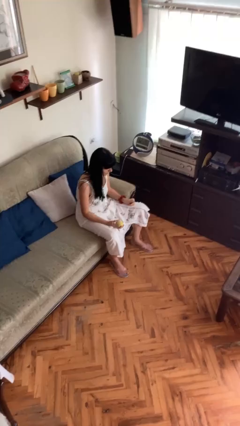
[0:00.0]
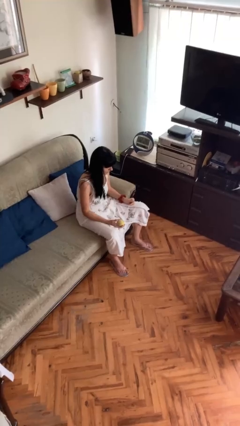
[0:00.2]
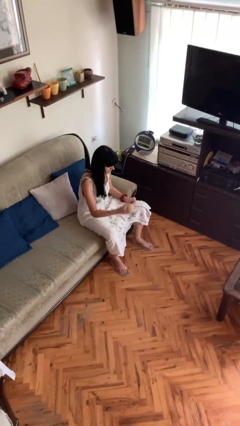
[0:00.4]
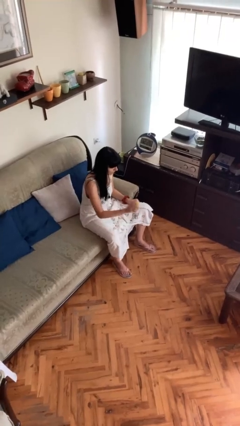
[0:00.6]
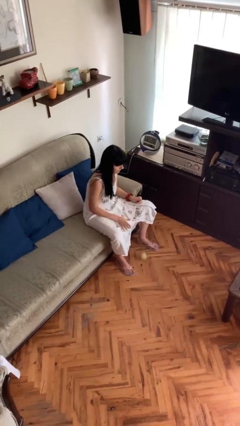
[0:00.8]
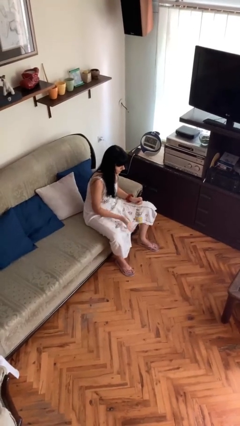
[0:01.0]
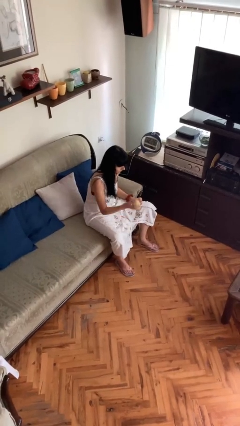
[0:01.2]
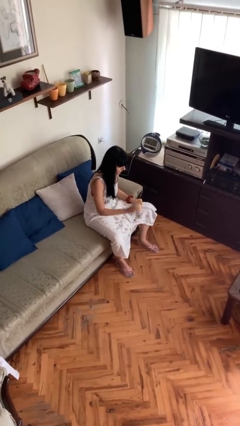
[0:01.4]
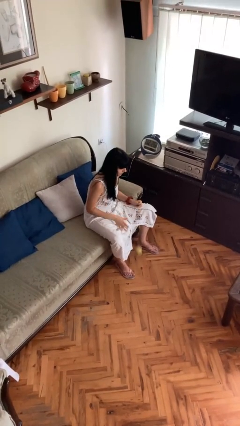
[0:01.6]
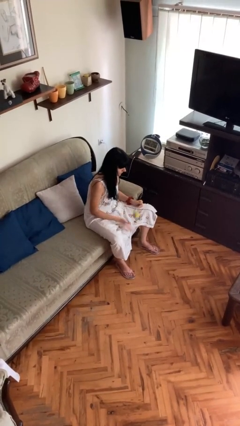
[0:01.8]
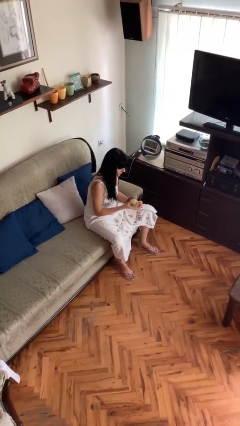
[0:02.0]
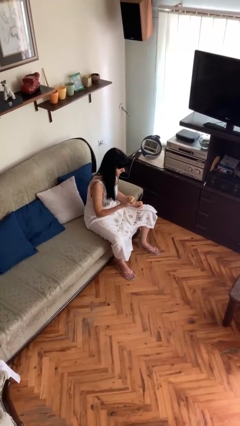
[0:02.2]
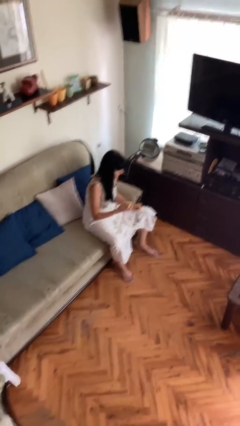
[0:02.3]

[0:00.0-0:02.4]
person bounces ball on floor

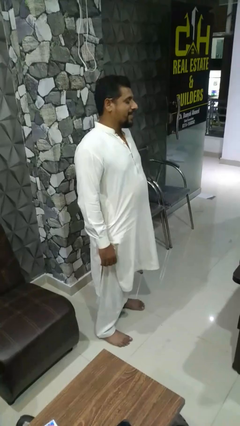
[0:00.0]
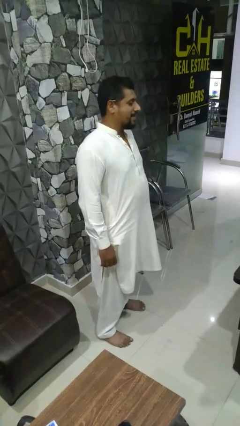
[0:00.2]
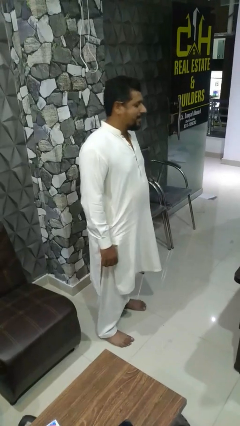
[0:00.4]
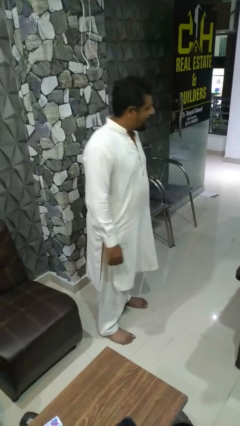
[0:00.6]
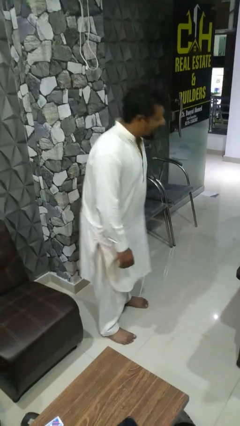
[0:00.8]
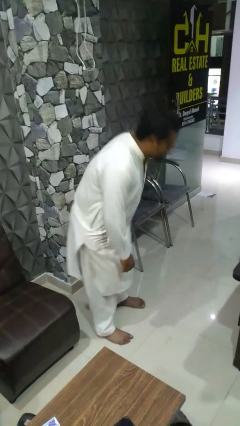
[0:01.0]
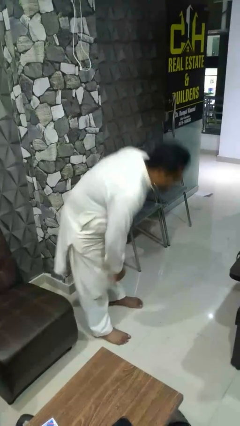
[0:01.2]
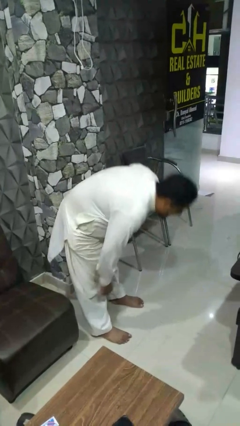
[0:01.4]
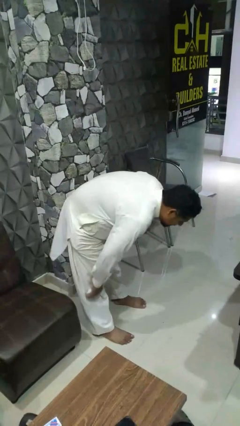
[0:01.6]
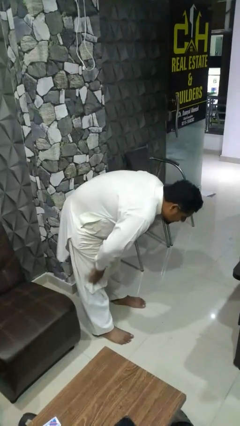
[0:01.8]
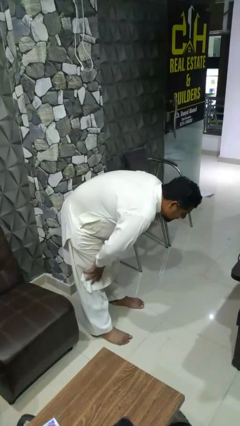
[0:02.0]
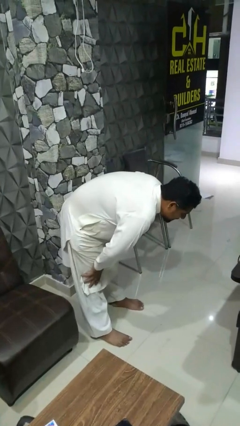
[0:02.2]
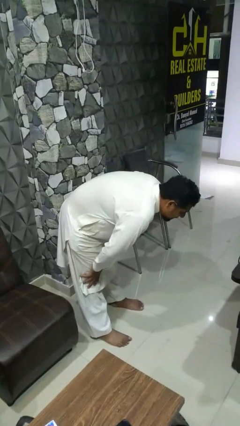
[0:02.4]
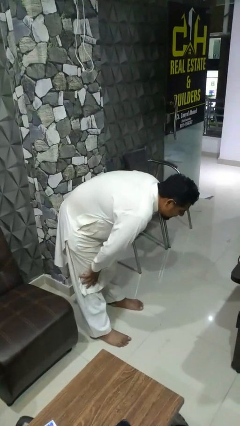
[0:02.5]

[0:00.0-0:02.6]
person bows

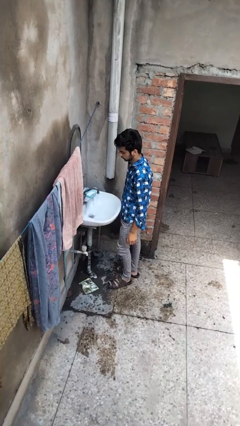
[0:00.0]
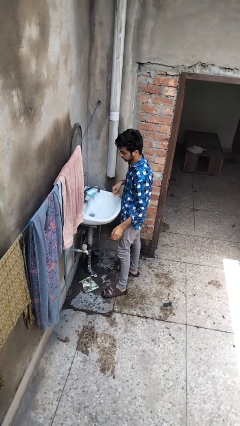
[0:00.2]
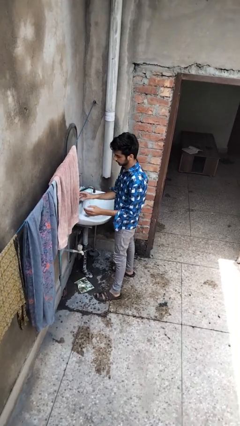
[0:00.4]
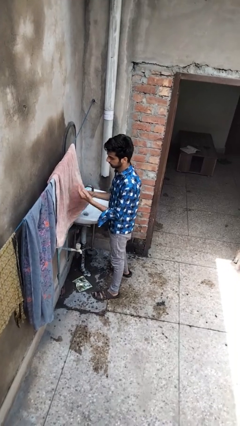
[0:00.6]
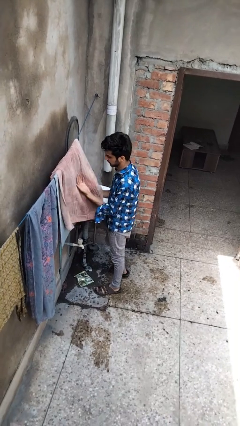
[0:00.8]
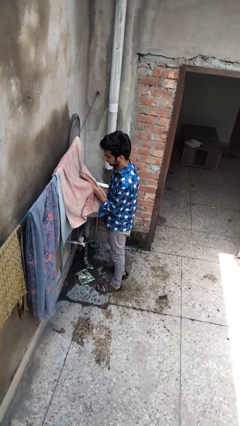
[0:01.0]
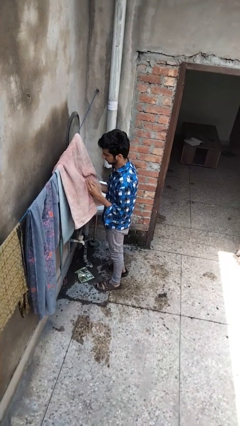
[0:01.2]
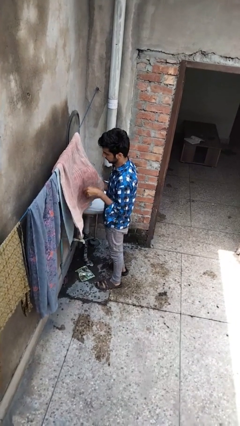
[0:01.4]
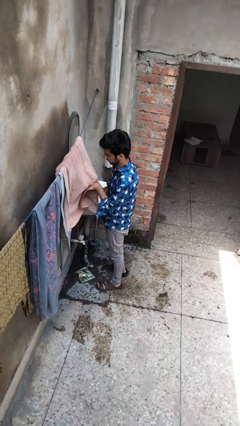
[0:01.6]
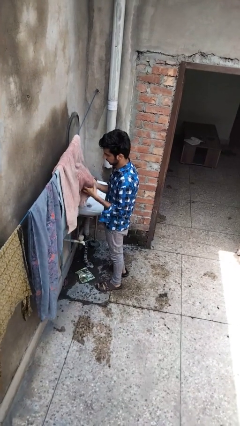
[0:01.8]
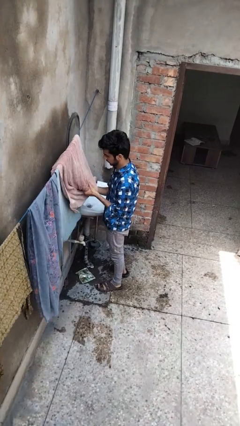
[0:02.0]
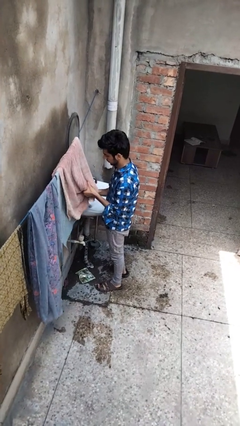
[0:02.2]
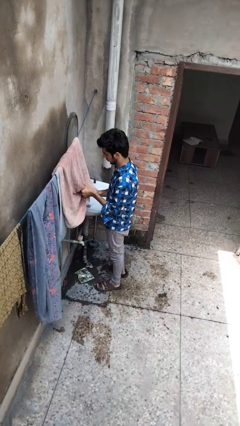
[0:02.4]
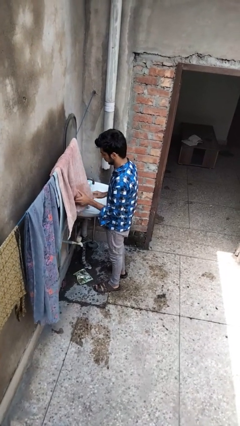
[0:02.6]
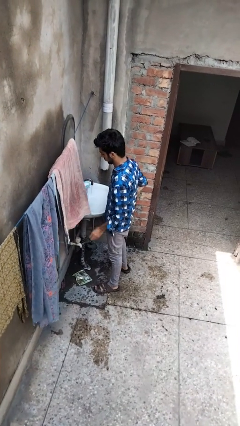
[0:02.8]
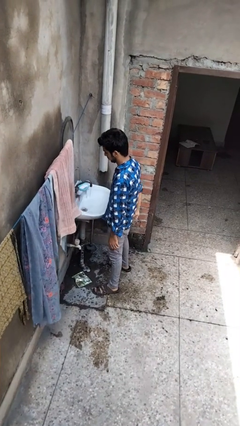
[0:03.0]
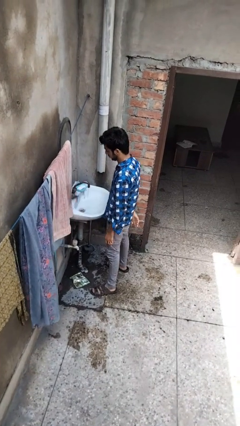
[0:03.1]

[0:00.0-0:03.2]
person dries hands with towel

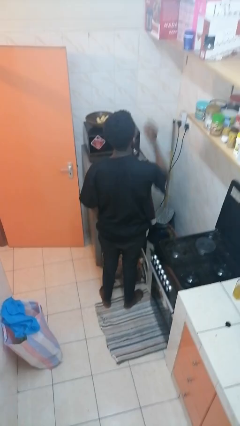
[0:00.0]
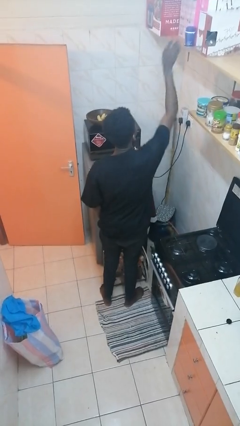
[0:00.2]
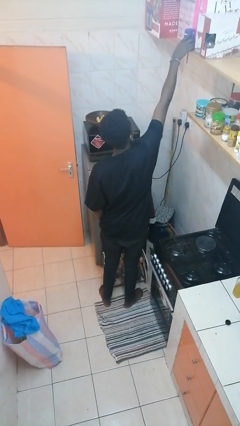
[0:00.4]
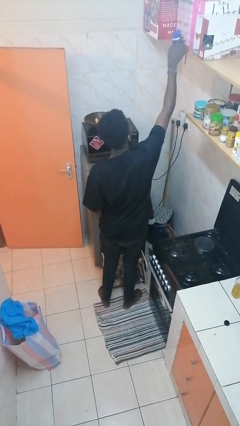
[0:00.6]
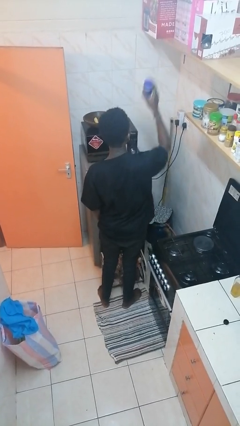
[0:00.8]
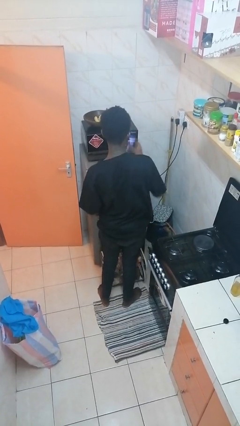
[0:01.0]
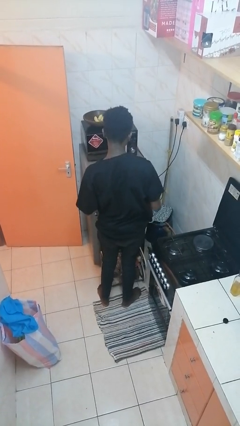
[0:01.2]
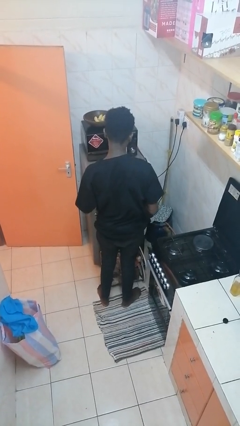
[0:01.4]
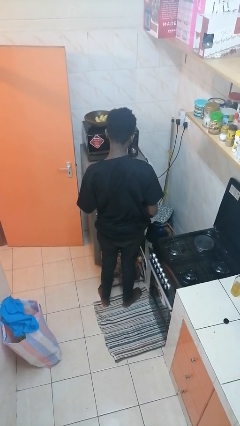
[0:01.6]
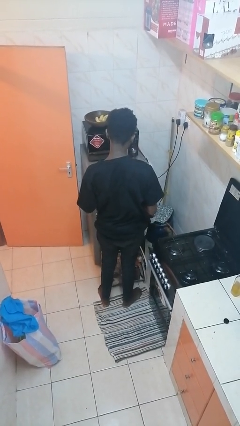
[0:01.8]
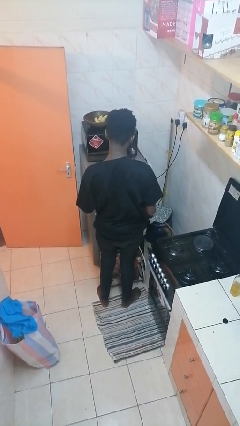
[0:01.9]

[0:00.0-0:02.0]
person picks up object from shelf

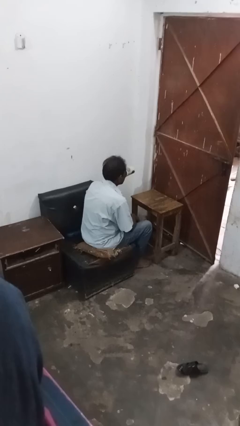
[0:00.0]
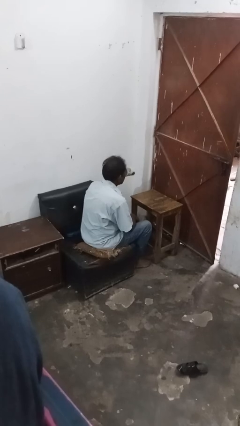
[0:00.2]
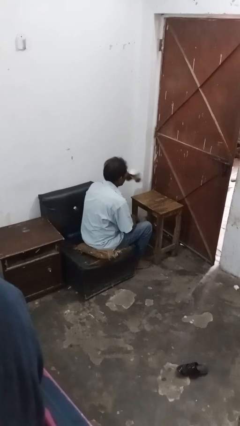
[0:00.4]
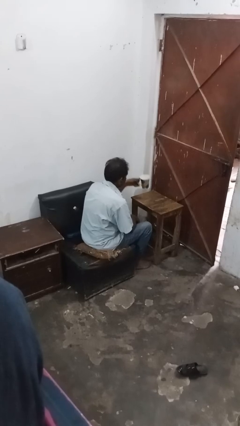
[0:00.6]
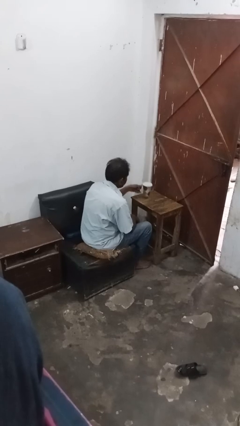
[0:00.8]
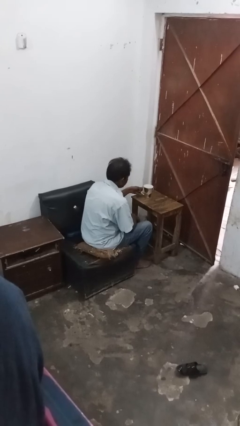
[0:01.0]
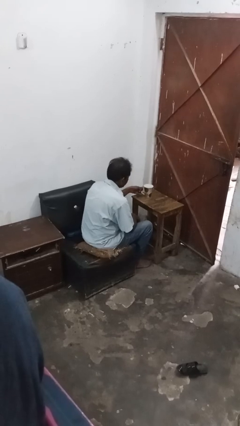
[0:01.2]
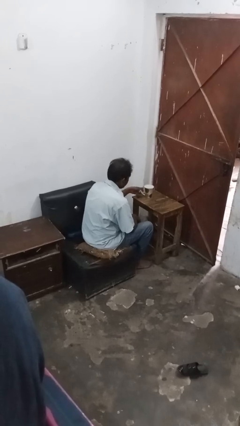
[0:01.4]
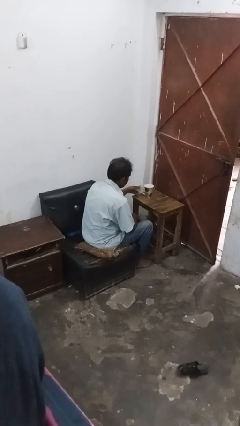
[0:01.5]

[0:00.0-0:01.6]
person puts down object on table

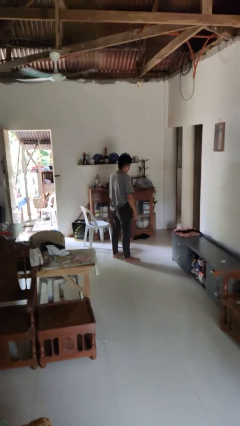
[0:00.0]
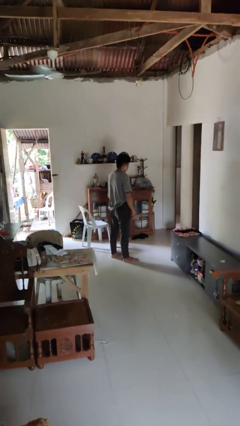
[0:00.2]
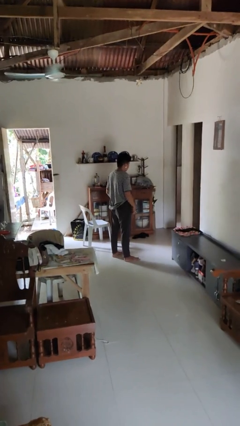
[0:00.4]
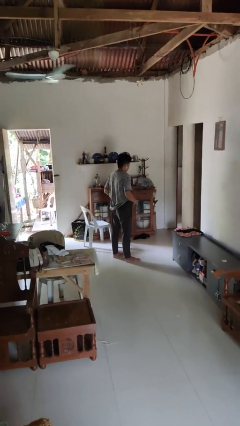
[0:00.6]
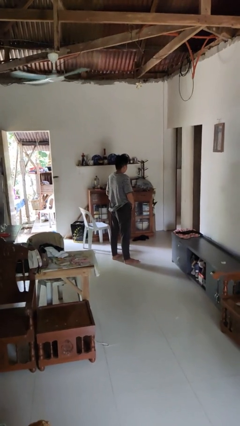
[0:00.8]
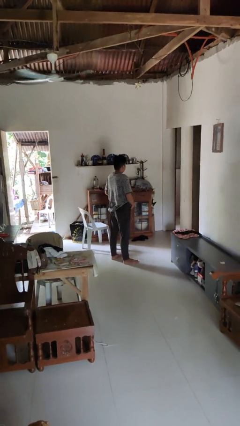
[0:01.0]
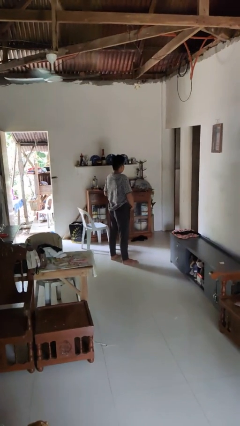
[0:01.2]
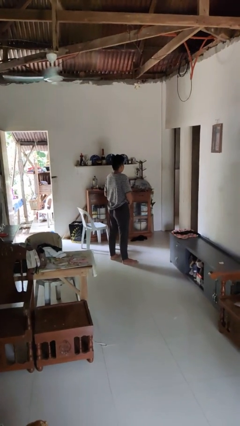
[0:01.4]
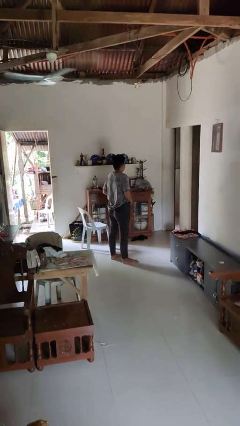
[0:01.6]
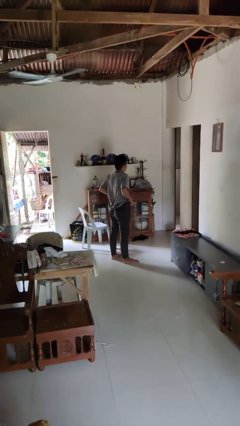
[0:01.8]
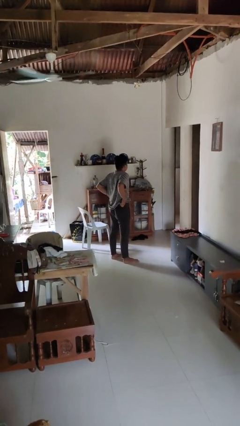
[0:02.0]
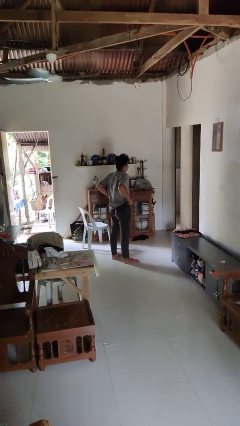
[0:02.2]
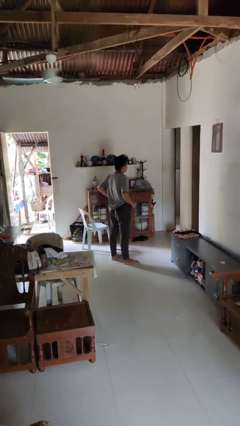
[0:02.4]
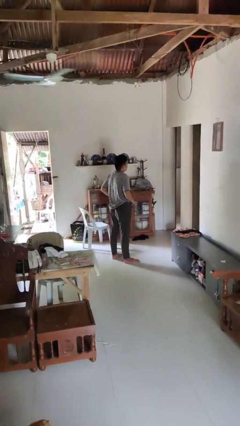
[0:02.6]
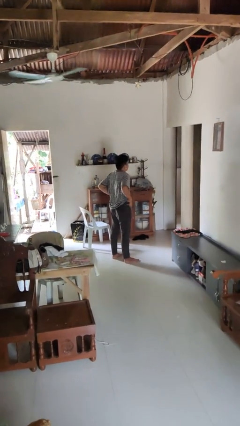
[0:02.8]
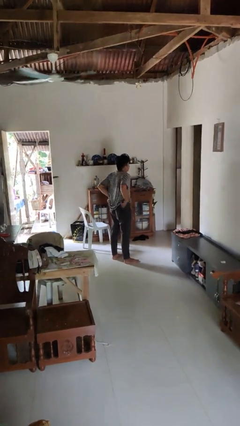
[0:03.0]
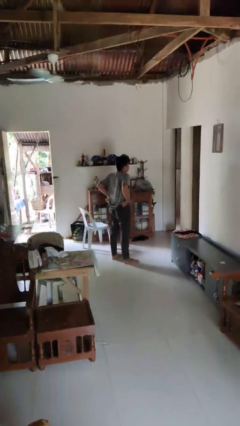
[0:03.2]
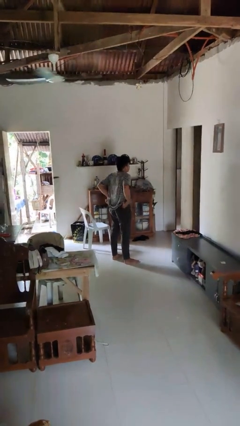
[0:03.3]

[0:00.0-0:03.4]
person hikes up pants

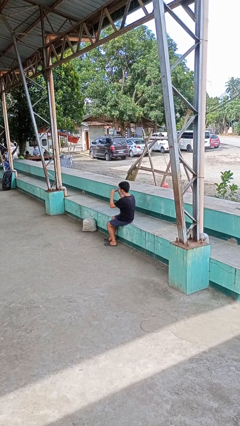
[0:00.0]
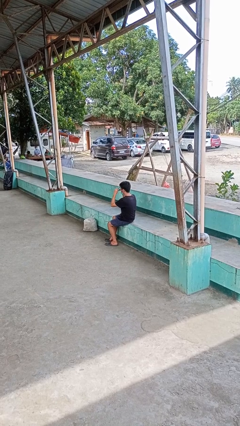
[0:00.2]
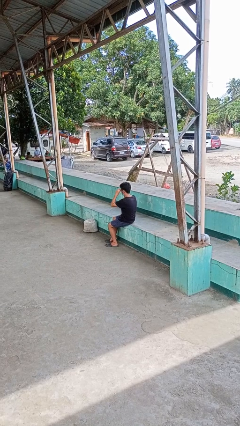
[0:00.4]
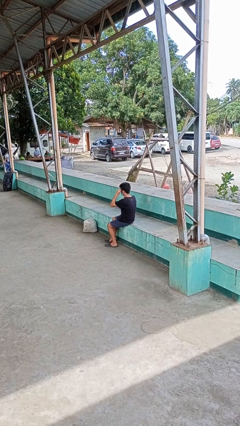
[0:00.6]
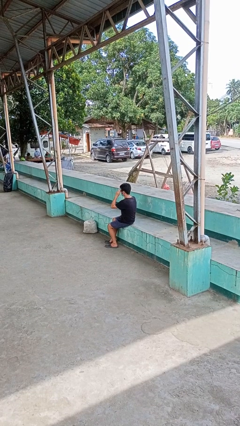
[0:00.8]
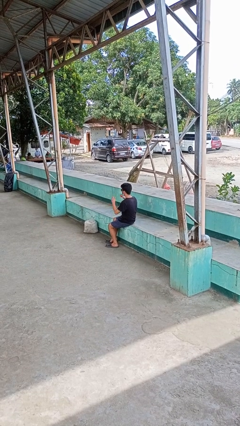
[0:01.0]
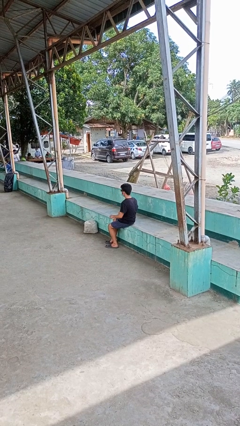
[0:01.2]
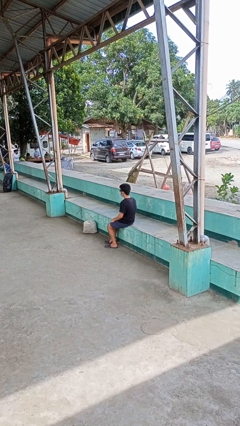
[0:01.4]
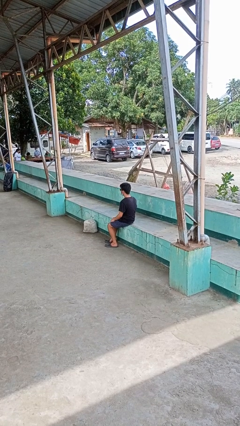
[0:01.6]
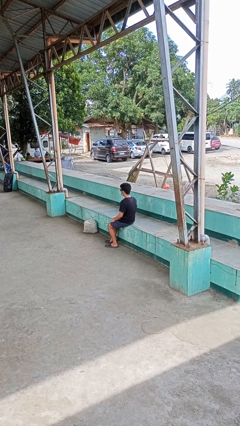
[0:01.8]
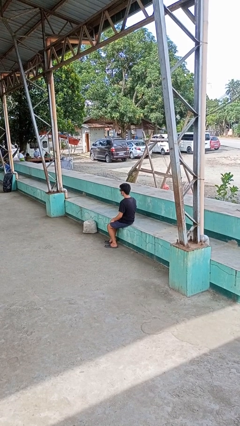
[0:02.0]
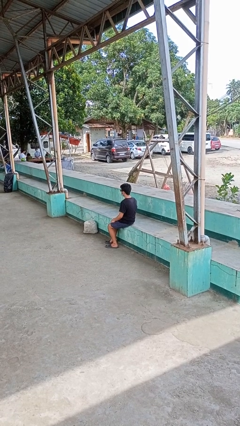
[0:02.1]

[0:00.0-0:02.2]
person puts on sunglasses
